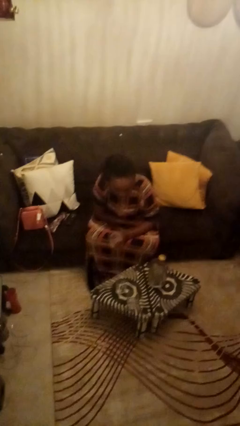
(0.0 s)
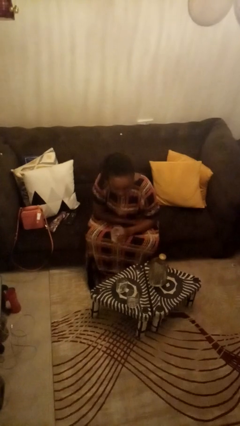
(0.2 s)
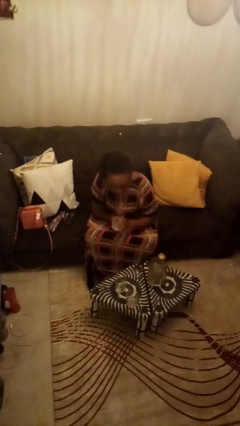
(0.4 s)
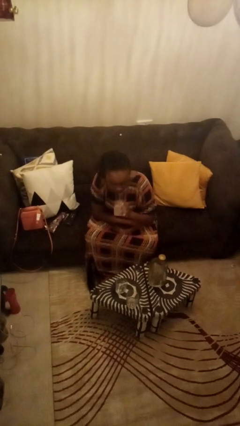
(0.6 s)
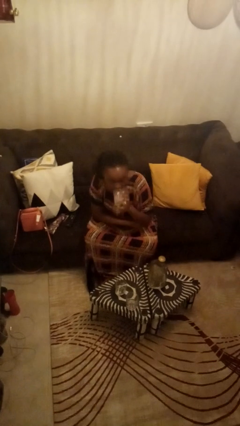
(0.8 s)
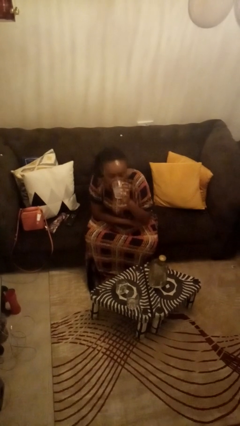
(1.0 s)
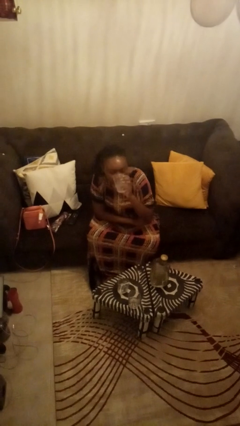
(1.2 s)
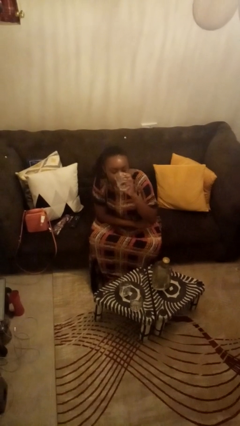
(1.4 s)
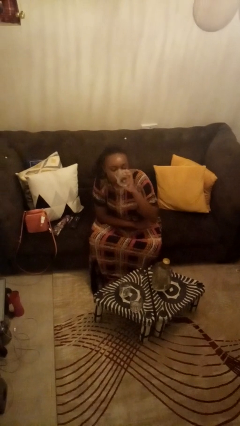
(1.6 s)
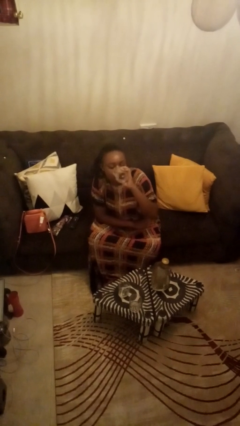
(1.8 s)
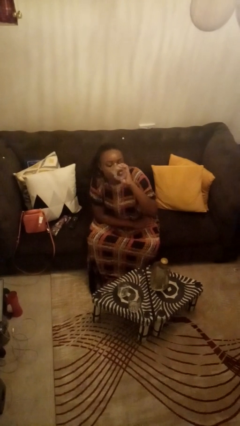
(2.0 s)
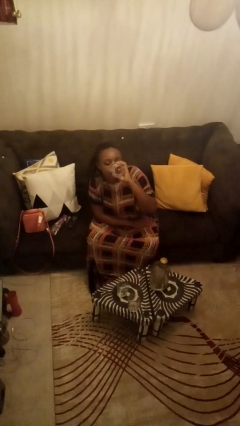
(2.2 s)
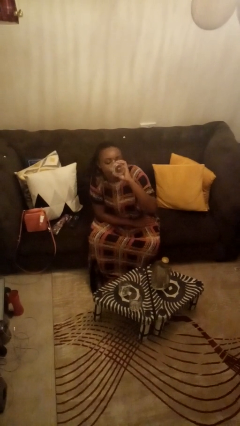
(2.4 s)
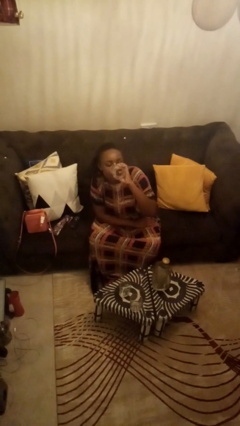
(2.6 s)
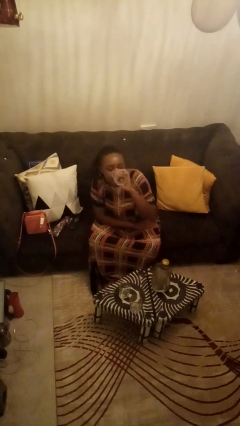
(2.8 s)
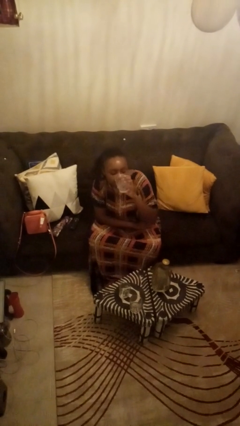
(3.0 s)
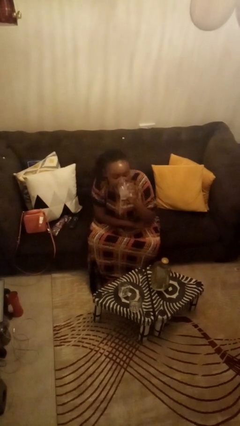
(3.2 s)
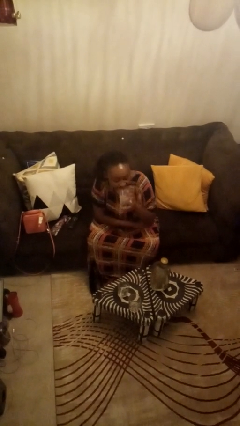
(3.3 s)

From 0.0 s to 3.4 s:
person drinks from shotglass

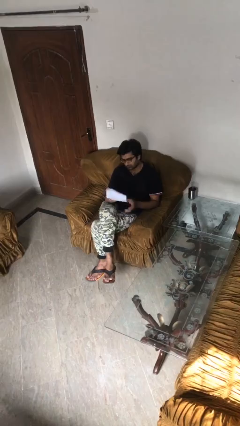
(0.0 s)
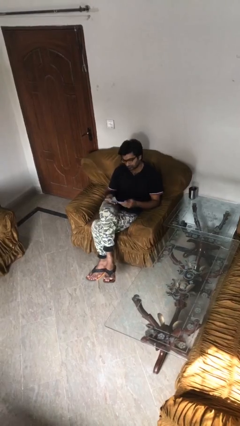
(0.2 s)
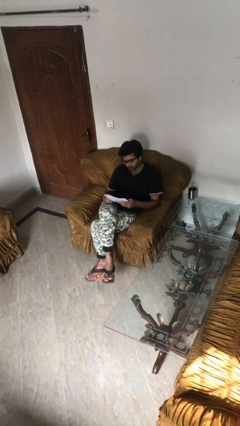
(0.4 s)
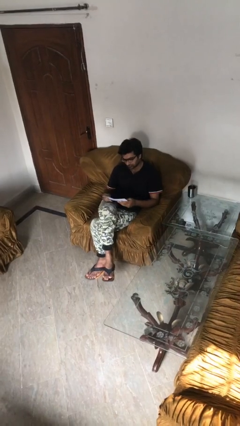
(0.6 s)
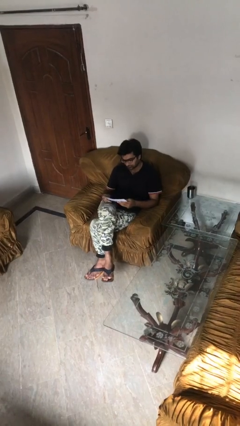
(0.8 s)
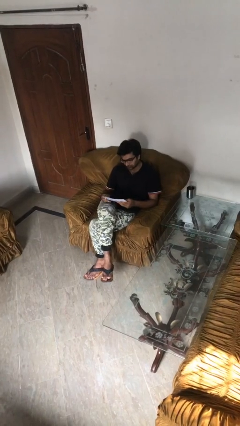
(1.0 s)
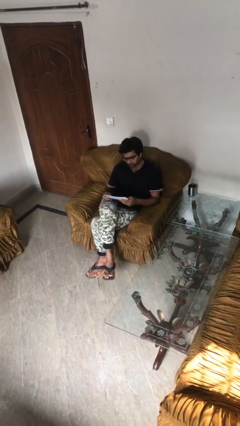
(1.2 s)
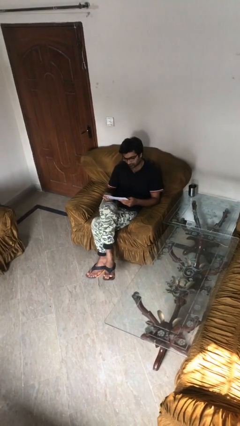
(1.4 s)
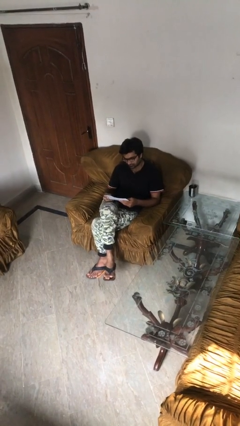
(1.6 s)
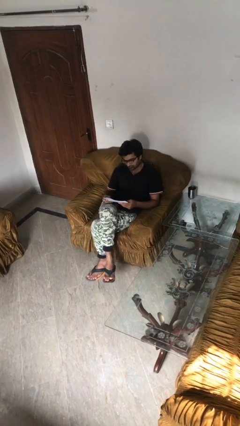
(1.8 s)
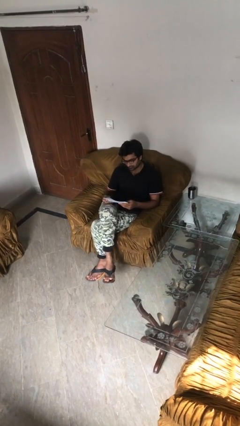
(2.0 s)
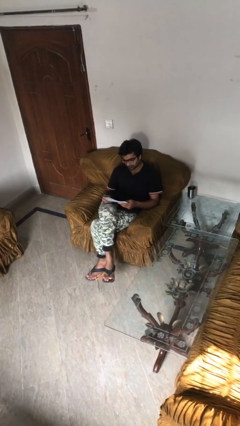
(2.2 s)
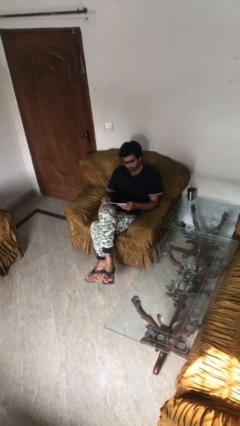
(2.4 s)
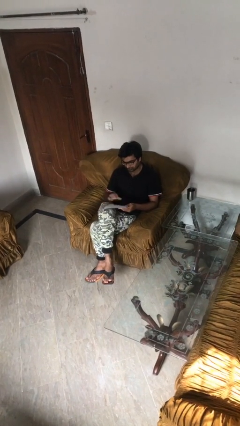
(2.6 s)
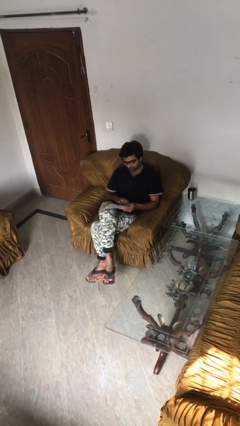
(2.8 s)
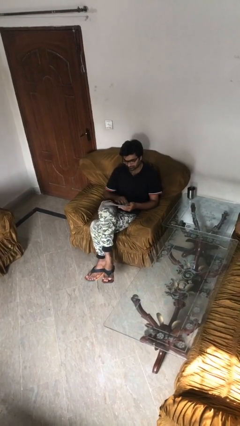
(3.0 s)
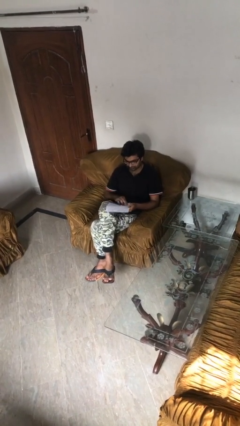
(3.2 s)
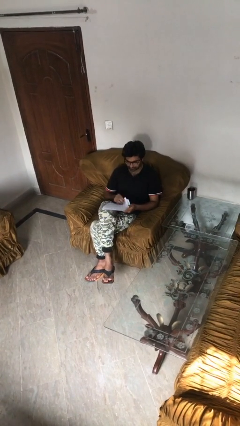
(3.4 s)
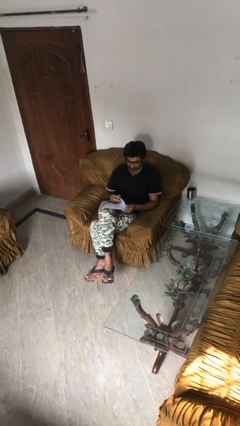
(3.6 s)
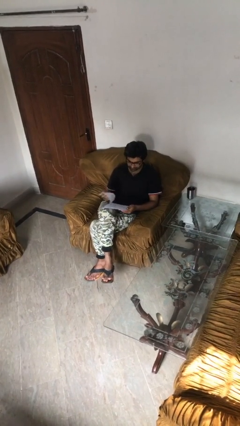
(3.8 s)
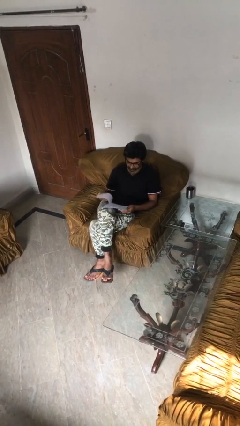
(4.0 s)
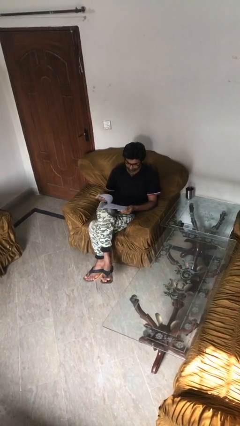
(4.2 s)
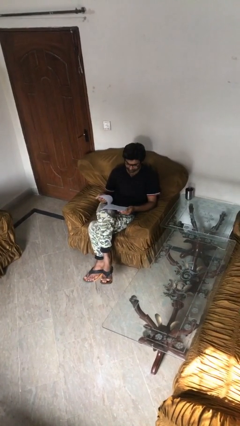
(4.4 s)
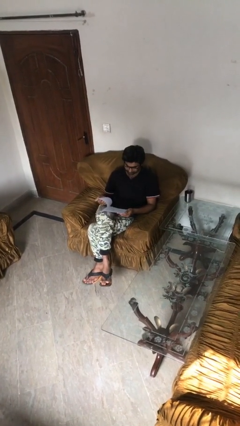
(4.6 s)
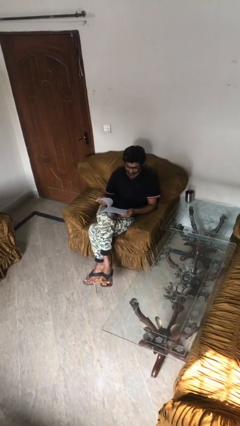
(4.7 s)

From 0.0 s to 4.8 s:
person reads document

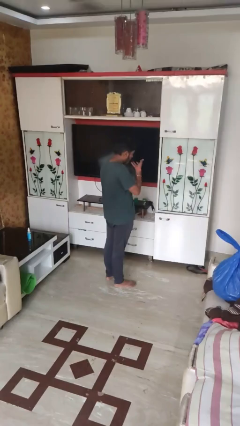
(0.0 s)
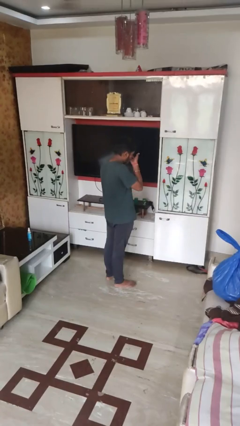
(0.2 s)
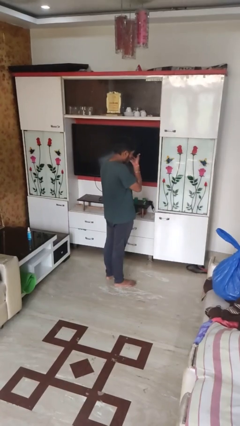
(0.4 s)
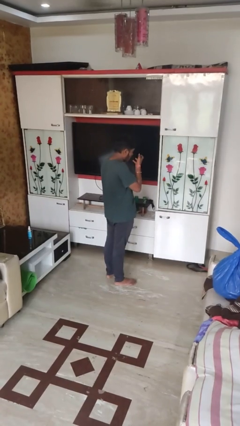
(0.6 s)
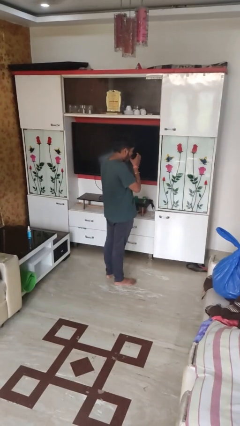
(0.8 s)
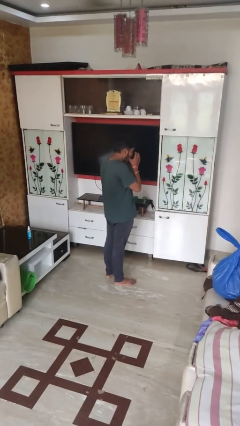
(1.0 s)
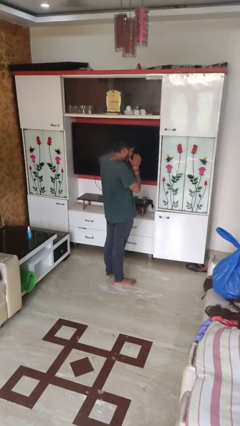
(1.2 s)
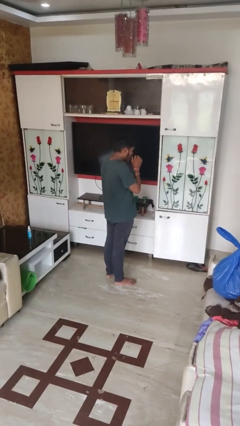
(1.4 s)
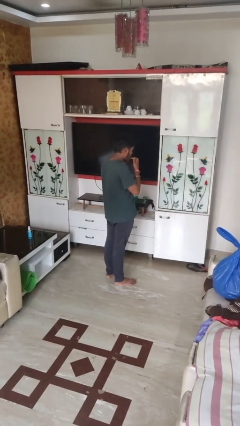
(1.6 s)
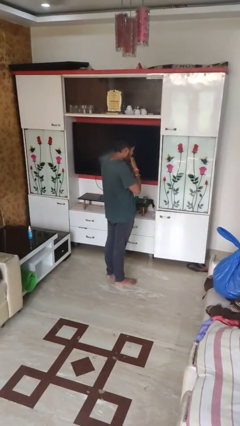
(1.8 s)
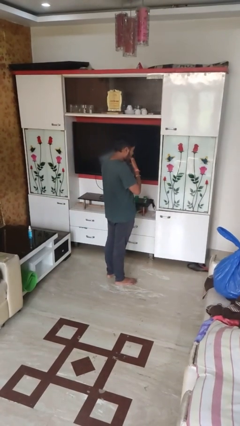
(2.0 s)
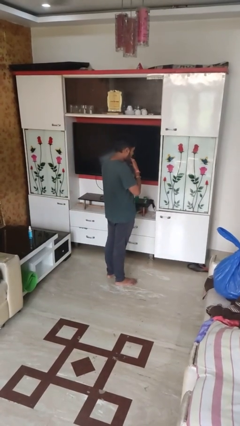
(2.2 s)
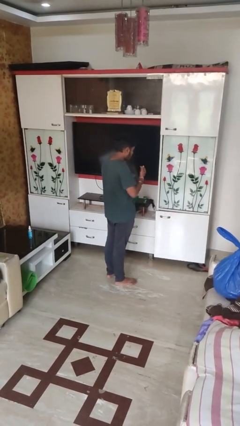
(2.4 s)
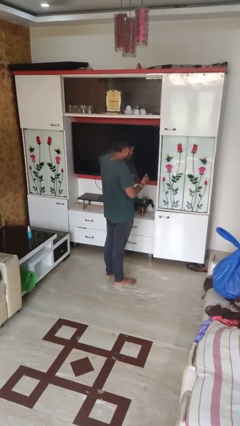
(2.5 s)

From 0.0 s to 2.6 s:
person licks fingers

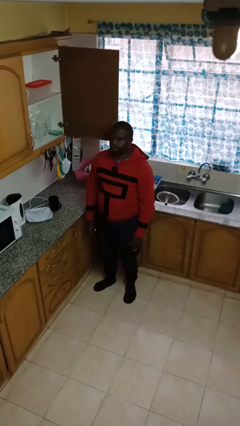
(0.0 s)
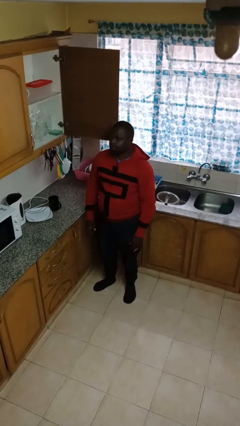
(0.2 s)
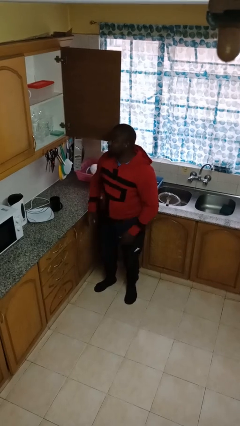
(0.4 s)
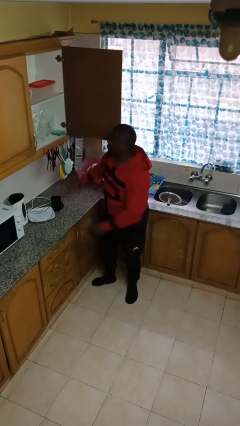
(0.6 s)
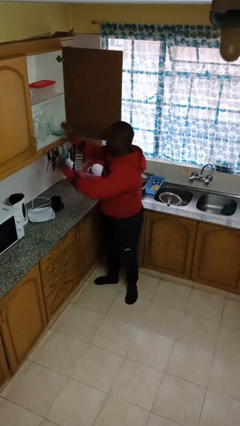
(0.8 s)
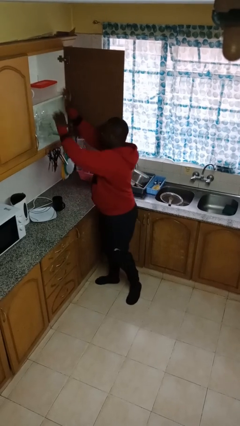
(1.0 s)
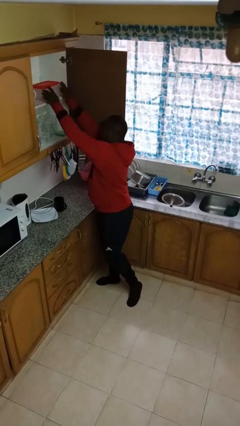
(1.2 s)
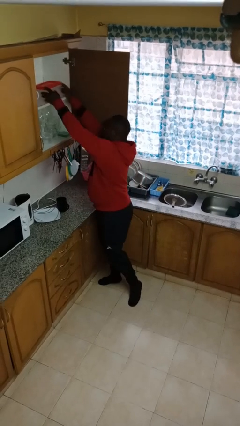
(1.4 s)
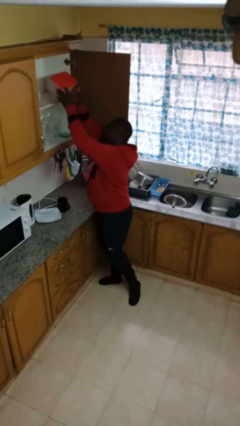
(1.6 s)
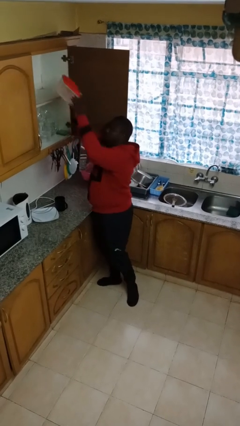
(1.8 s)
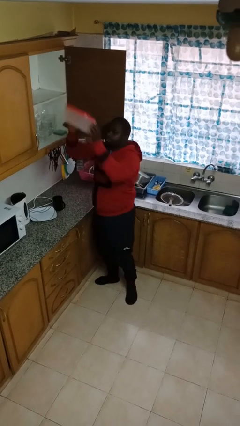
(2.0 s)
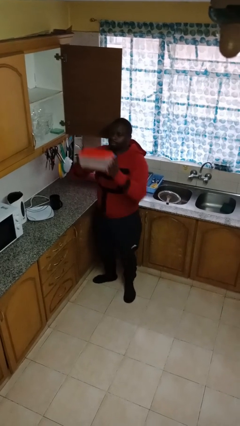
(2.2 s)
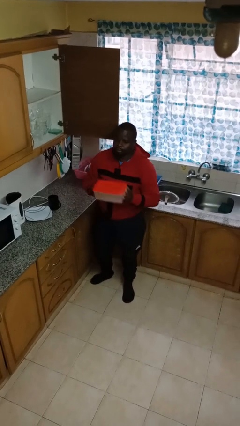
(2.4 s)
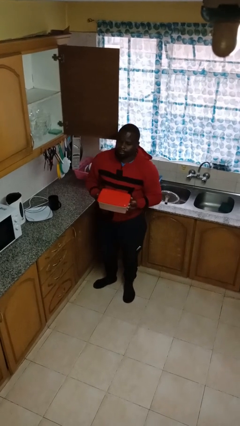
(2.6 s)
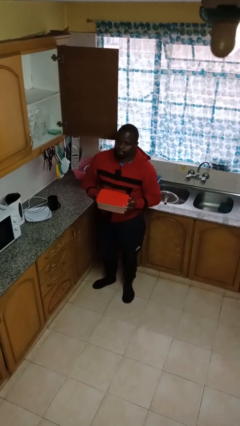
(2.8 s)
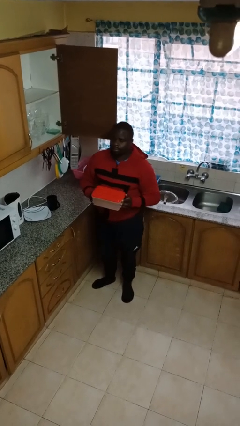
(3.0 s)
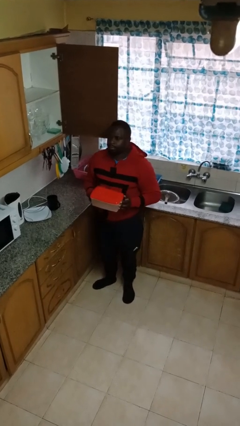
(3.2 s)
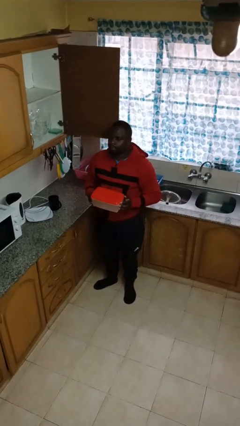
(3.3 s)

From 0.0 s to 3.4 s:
person picks up object from cabinet

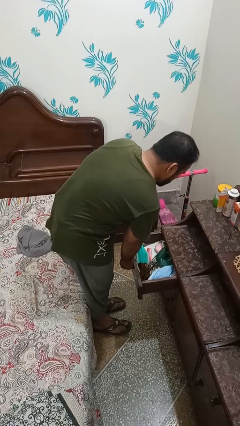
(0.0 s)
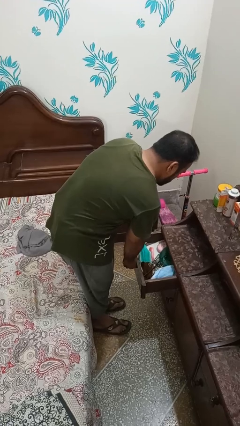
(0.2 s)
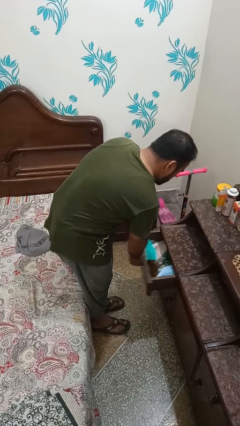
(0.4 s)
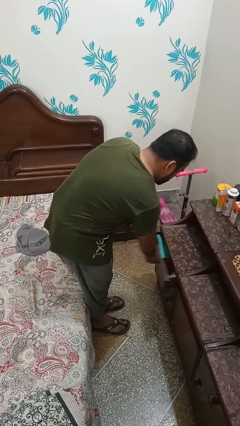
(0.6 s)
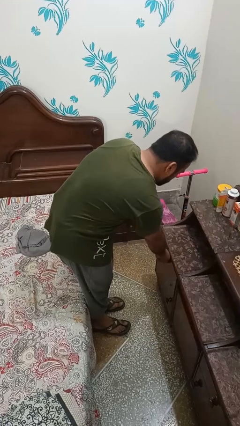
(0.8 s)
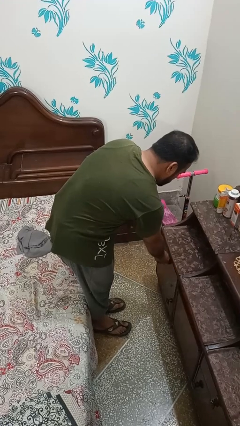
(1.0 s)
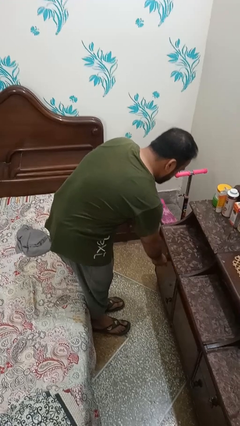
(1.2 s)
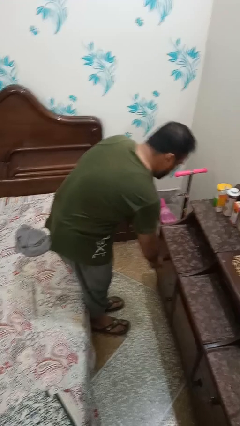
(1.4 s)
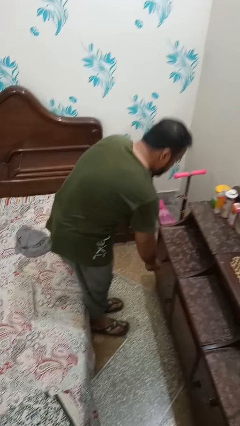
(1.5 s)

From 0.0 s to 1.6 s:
person closes dresser drawer

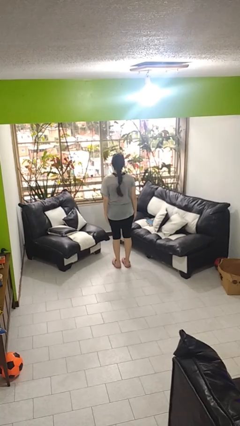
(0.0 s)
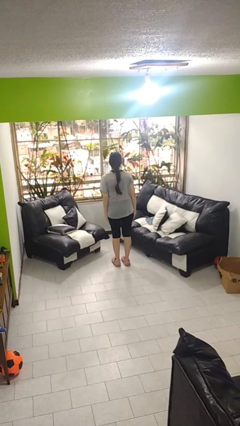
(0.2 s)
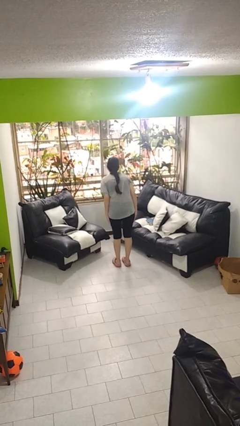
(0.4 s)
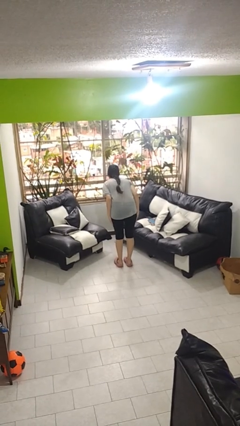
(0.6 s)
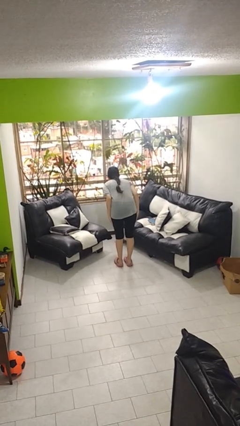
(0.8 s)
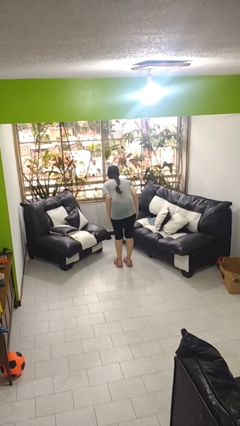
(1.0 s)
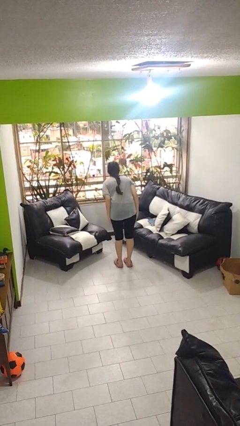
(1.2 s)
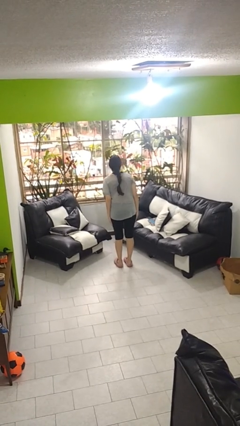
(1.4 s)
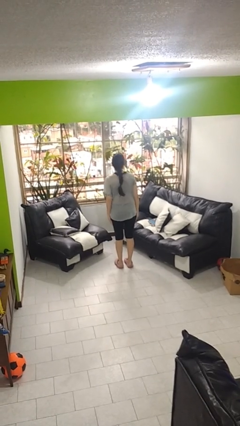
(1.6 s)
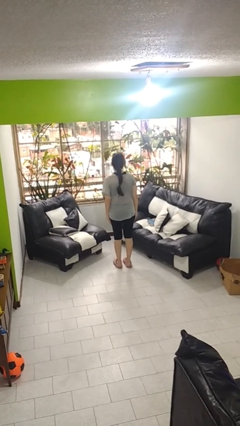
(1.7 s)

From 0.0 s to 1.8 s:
person bows
